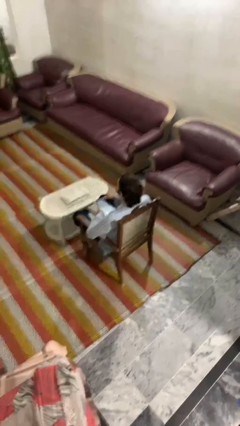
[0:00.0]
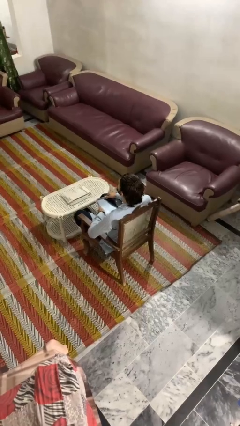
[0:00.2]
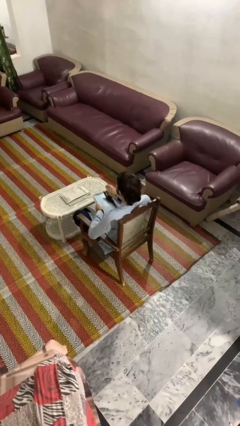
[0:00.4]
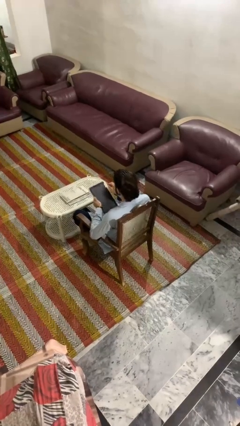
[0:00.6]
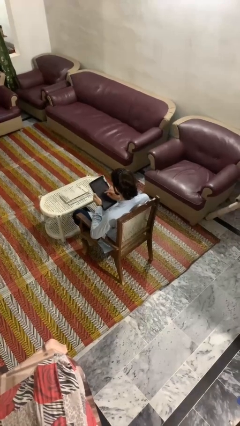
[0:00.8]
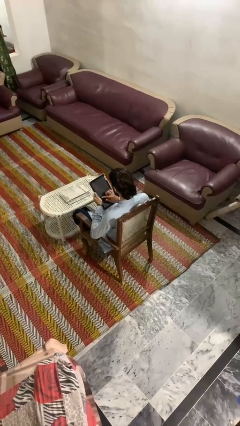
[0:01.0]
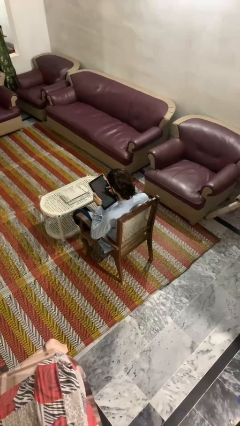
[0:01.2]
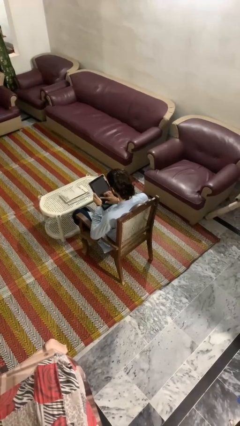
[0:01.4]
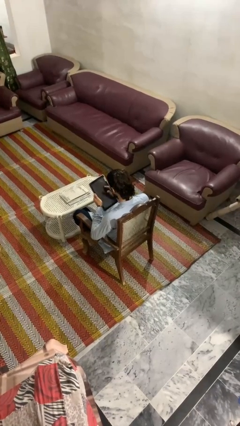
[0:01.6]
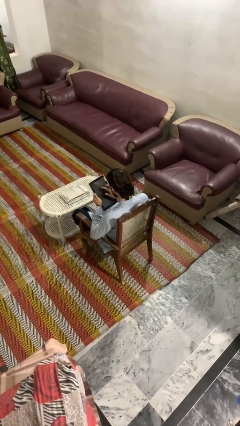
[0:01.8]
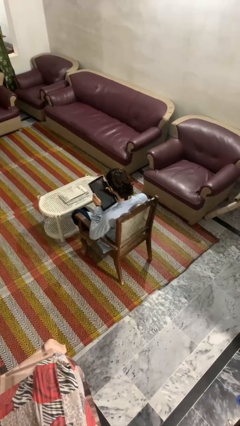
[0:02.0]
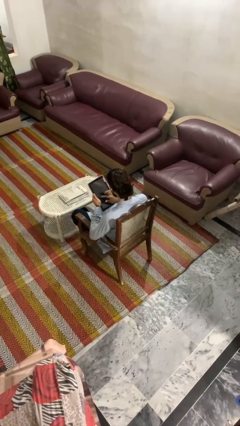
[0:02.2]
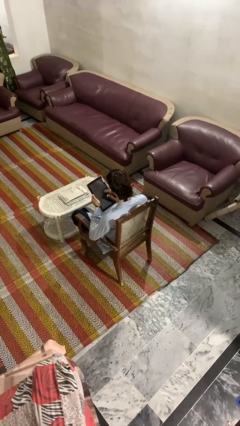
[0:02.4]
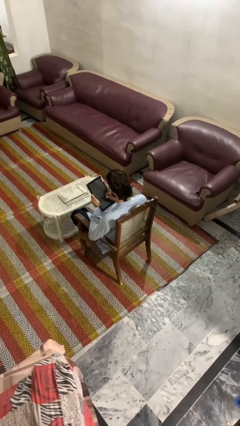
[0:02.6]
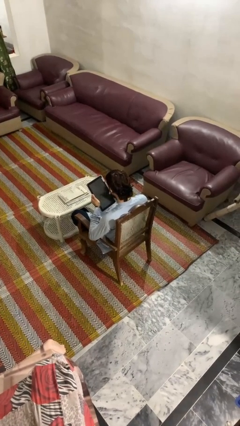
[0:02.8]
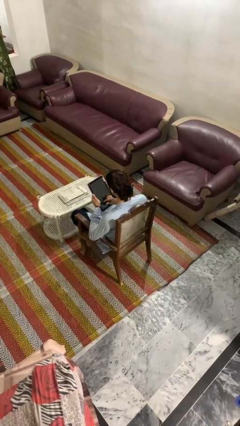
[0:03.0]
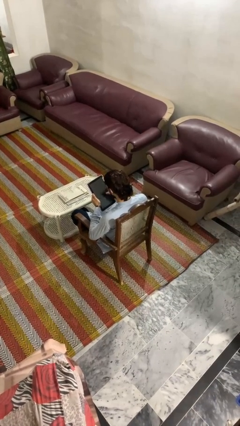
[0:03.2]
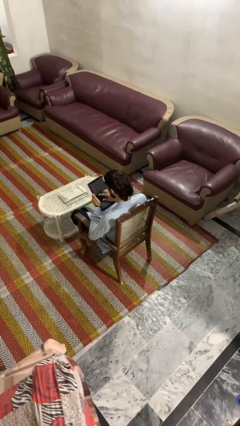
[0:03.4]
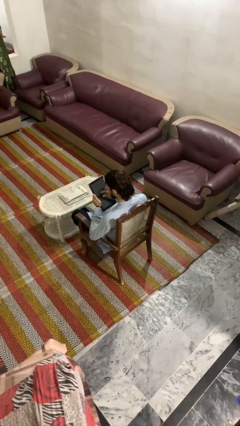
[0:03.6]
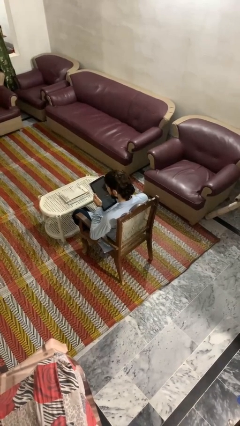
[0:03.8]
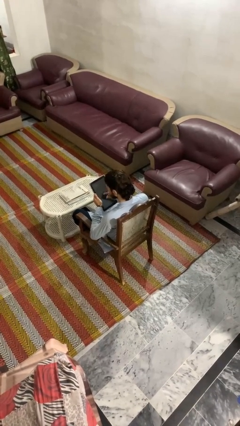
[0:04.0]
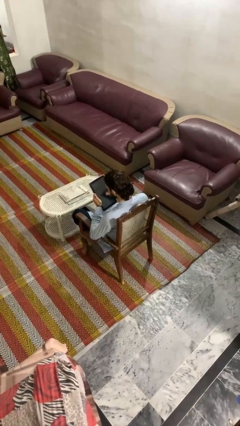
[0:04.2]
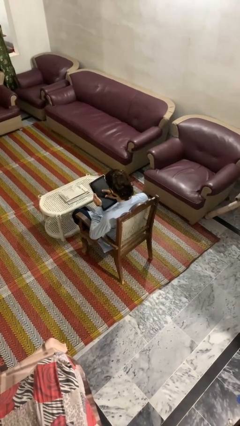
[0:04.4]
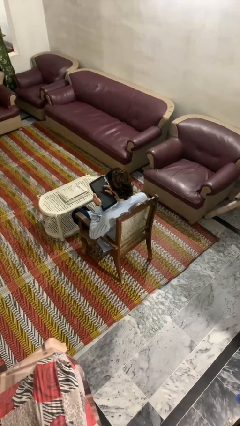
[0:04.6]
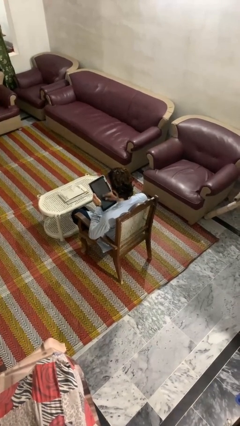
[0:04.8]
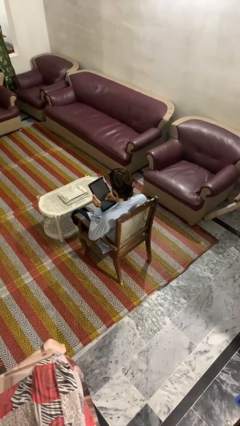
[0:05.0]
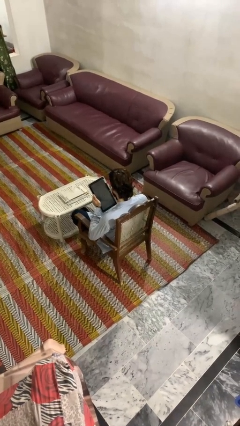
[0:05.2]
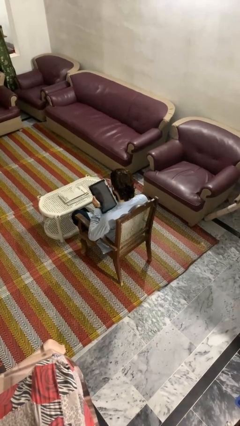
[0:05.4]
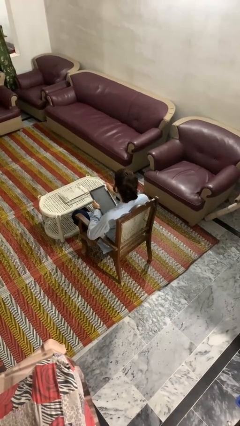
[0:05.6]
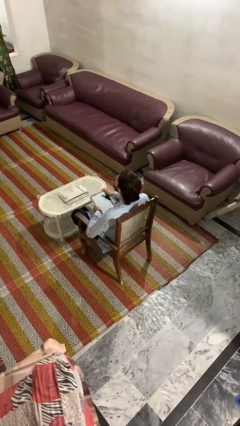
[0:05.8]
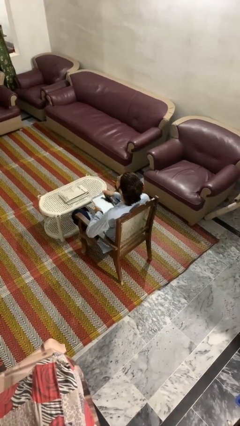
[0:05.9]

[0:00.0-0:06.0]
person interacts with tablet

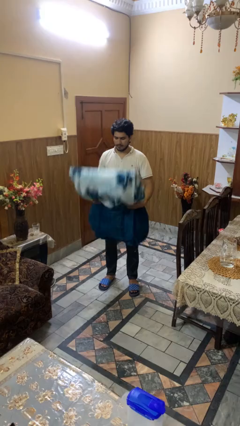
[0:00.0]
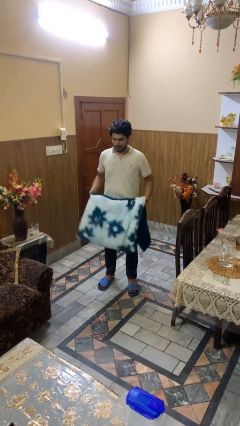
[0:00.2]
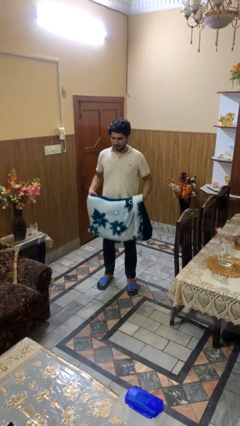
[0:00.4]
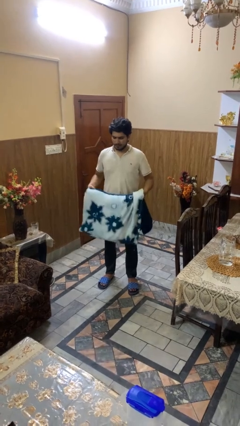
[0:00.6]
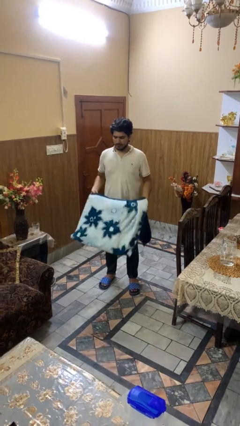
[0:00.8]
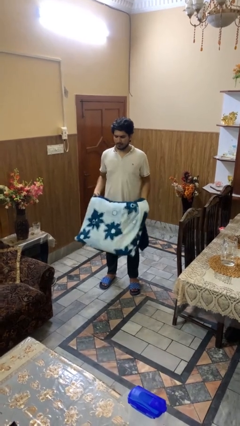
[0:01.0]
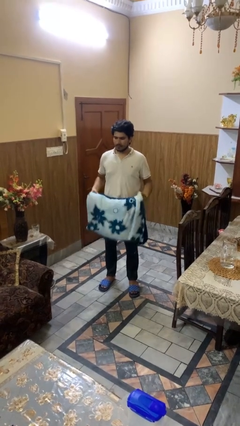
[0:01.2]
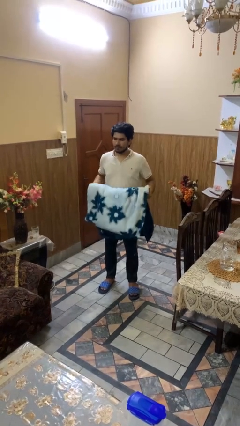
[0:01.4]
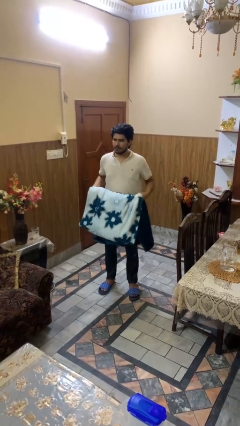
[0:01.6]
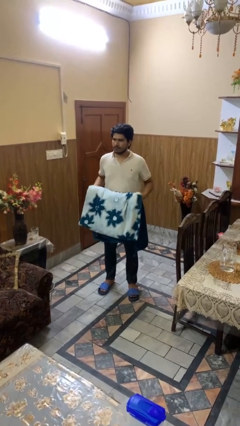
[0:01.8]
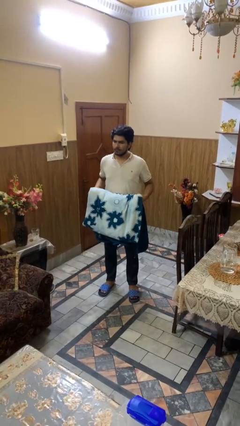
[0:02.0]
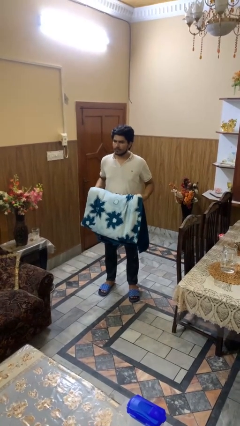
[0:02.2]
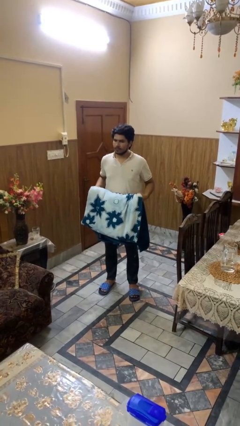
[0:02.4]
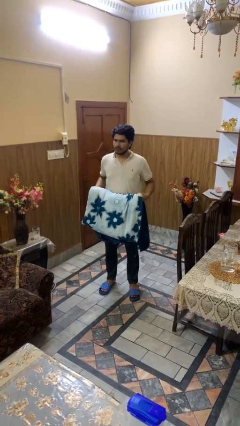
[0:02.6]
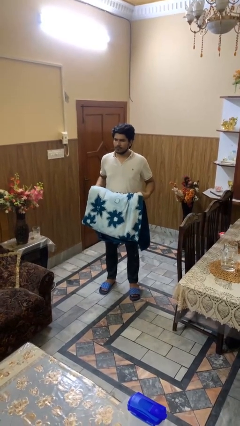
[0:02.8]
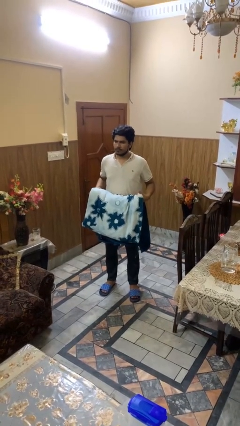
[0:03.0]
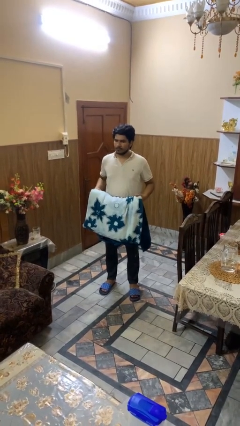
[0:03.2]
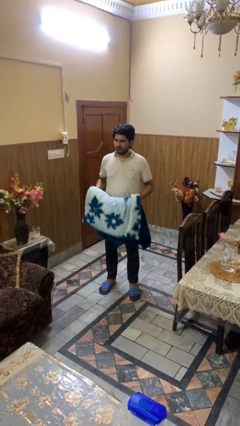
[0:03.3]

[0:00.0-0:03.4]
person folds blanket

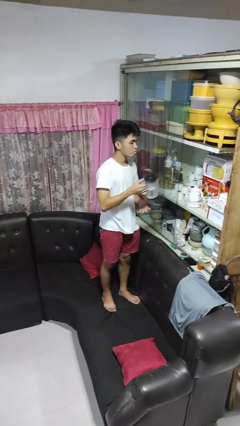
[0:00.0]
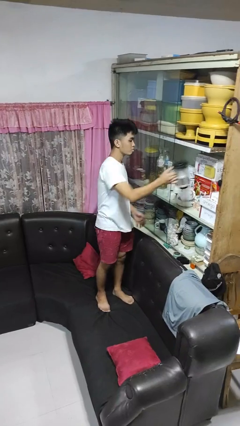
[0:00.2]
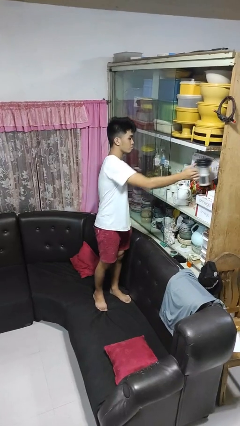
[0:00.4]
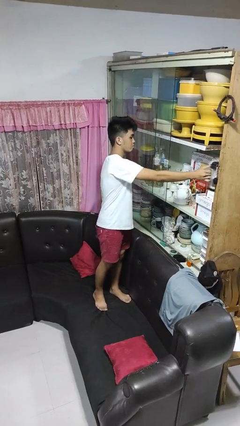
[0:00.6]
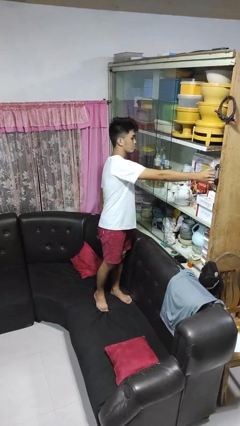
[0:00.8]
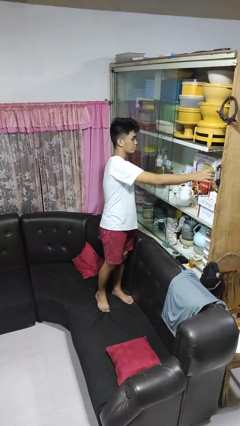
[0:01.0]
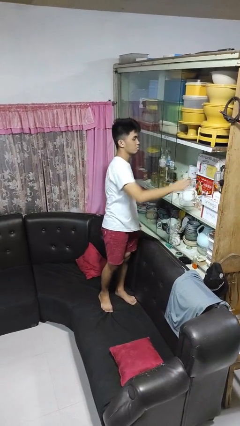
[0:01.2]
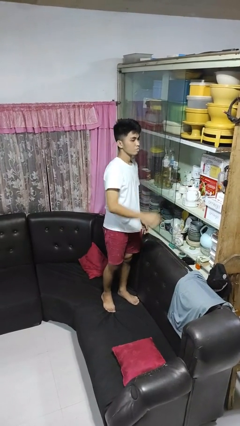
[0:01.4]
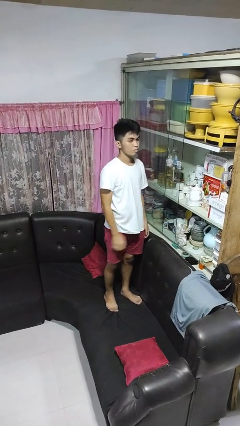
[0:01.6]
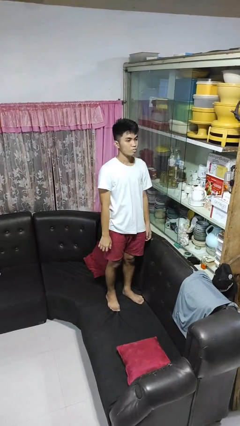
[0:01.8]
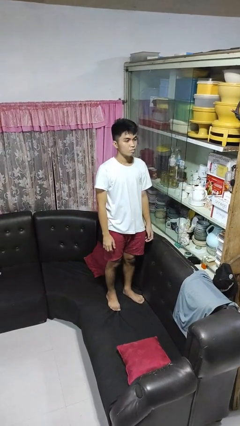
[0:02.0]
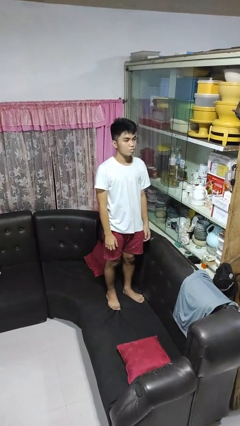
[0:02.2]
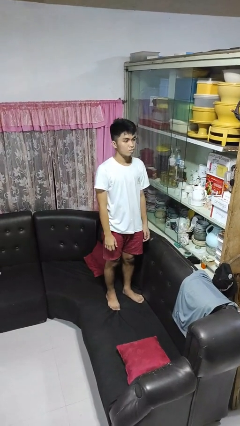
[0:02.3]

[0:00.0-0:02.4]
person puts down object into cabinet

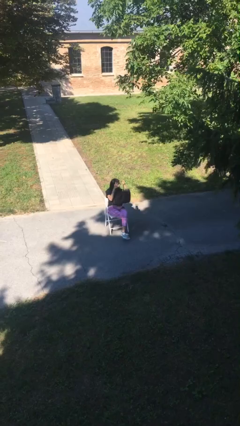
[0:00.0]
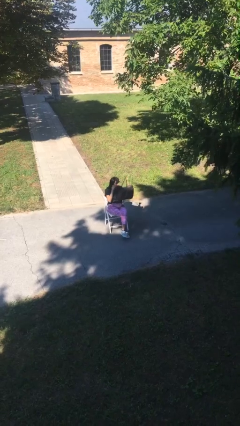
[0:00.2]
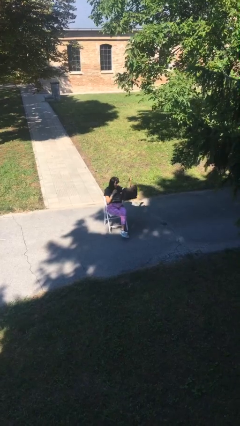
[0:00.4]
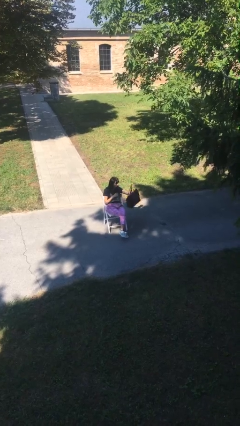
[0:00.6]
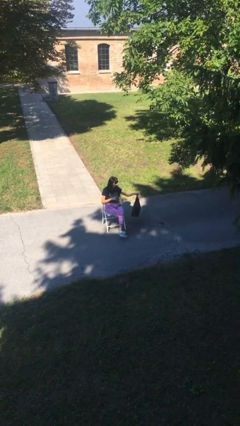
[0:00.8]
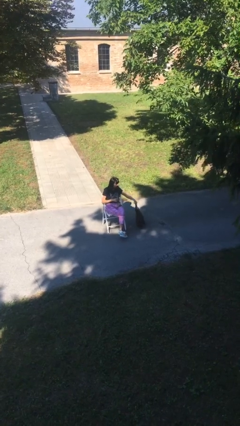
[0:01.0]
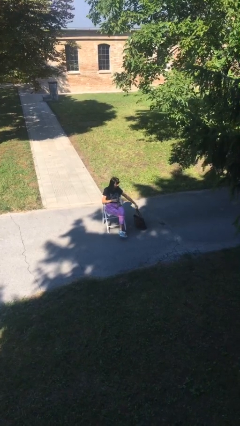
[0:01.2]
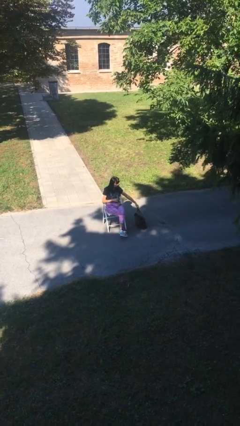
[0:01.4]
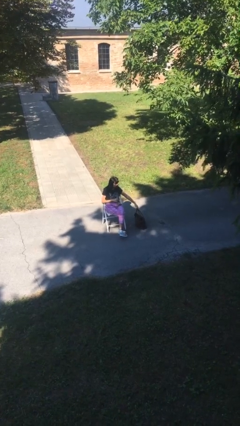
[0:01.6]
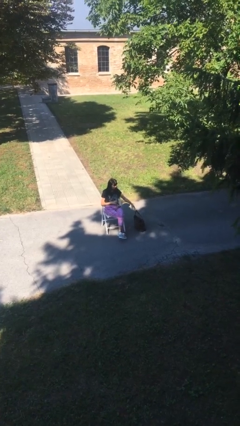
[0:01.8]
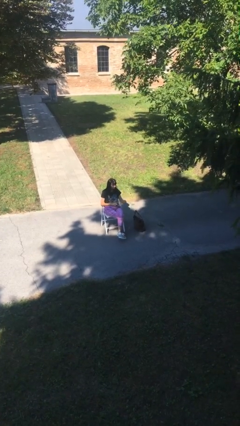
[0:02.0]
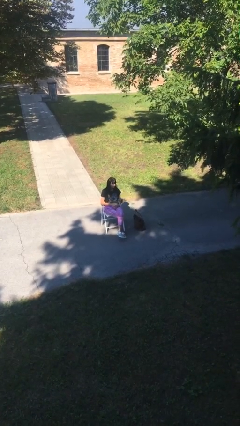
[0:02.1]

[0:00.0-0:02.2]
person puts down object on floor

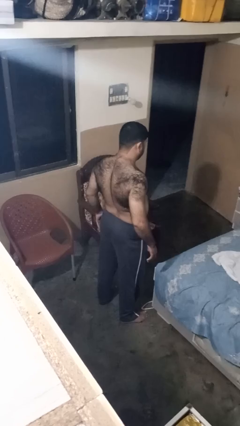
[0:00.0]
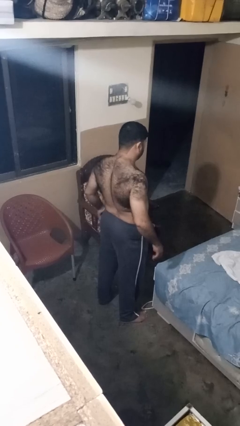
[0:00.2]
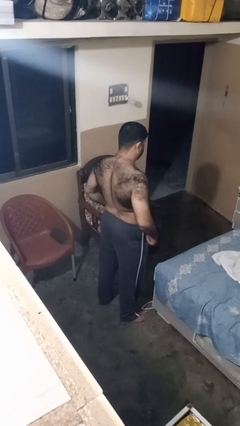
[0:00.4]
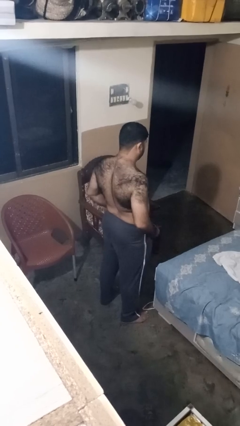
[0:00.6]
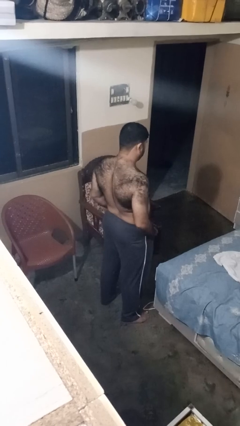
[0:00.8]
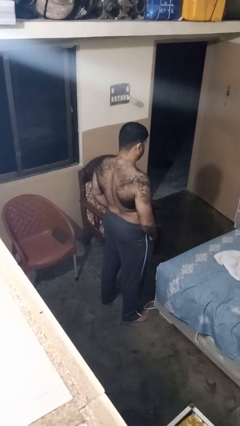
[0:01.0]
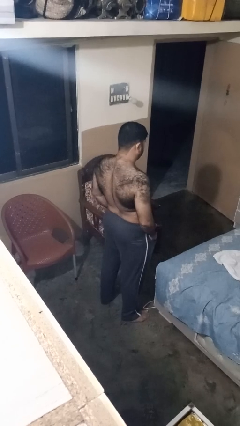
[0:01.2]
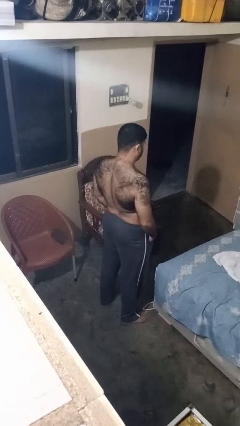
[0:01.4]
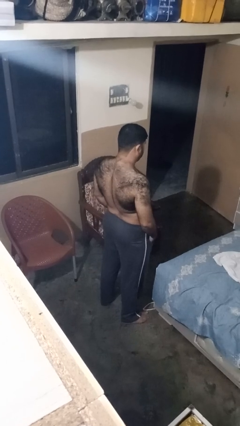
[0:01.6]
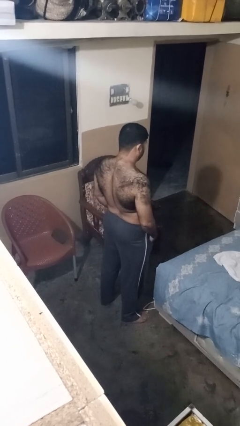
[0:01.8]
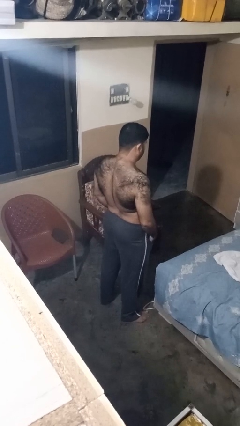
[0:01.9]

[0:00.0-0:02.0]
person puts hands in back pockets

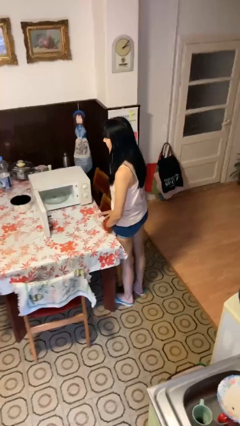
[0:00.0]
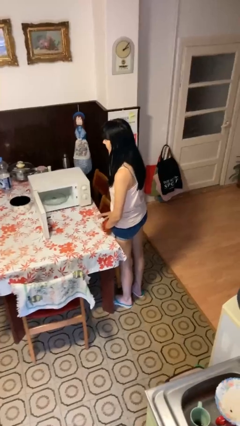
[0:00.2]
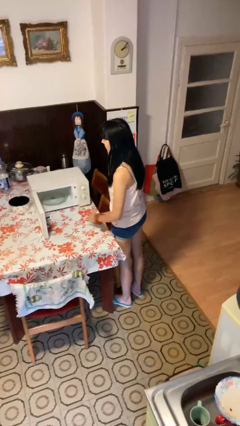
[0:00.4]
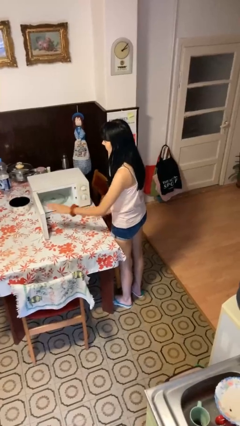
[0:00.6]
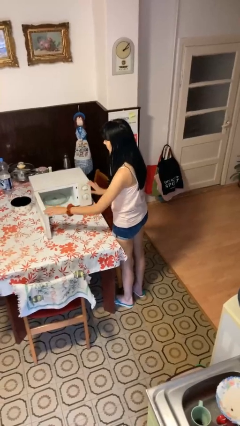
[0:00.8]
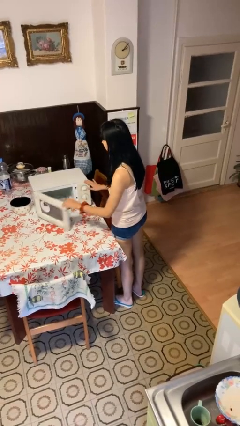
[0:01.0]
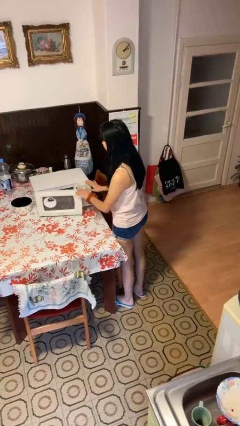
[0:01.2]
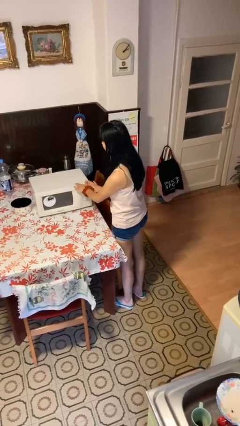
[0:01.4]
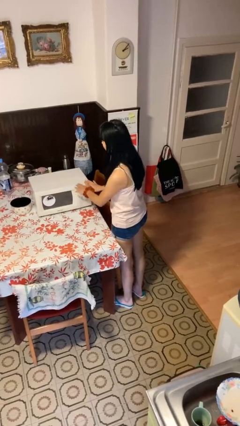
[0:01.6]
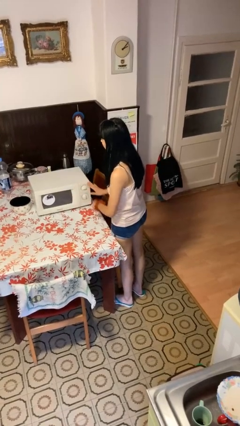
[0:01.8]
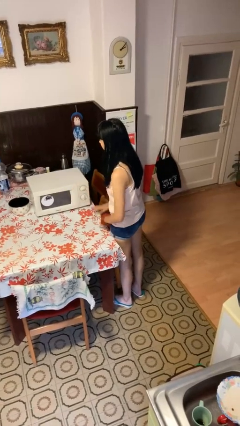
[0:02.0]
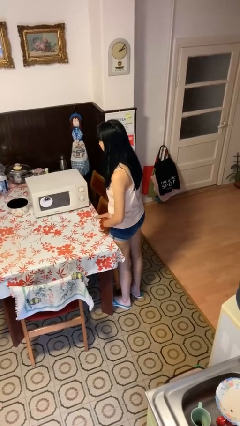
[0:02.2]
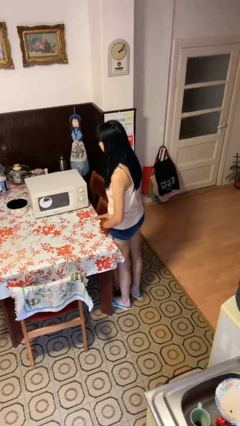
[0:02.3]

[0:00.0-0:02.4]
person closes microwave
